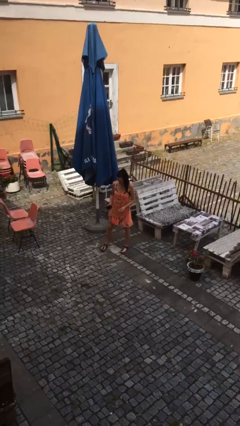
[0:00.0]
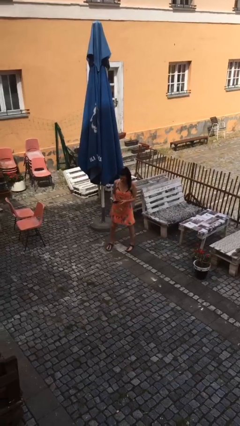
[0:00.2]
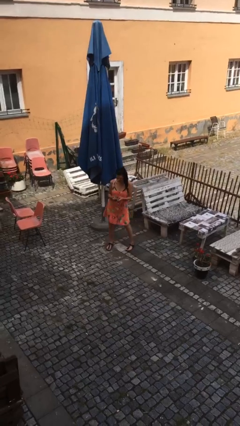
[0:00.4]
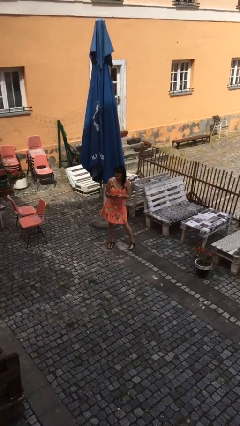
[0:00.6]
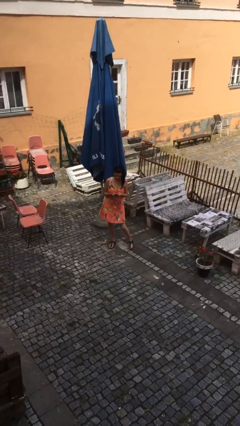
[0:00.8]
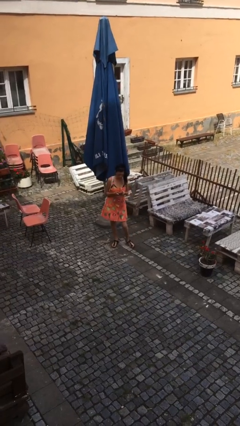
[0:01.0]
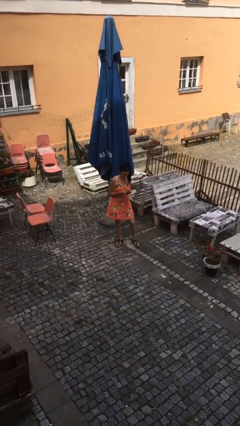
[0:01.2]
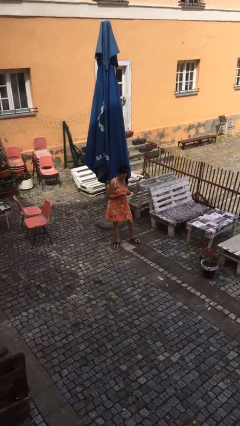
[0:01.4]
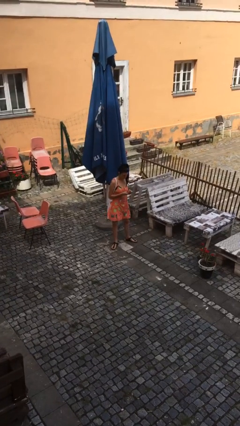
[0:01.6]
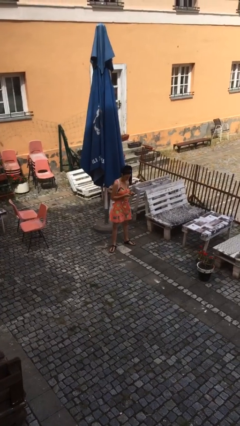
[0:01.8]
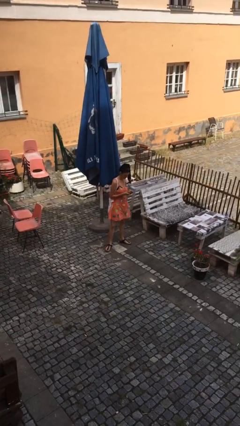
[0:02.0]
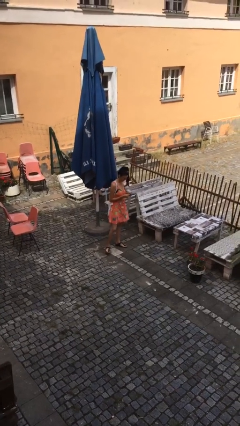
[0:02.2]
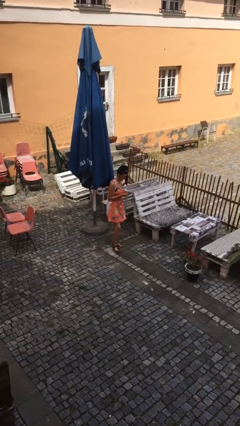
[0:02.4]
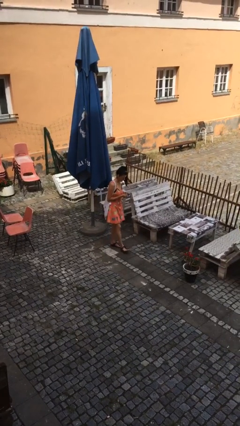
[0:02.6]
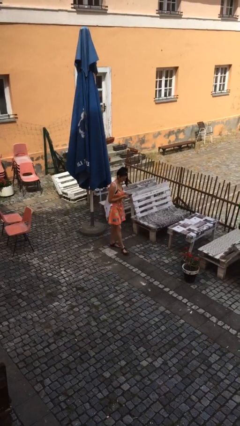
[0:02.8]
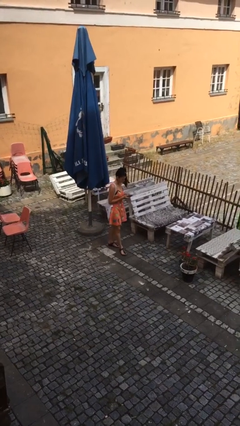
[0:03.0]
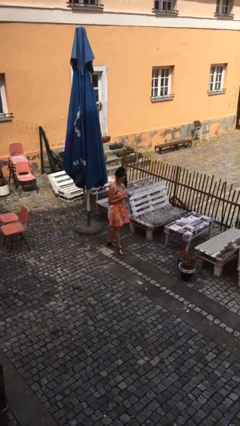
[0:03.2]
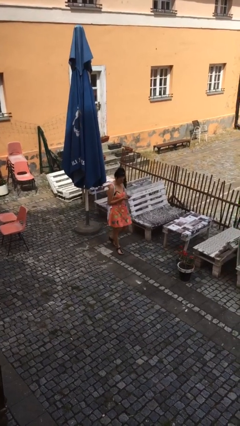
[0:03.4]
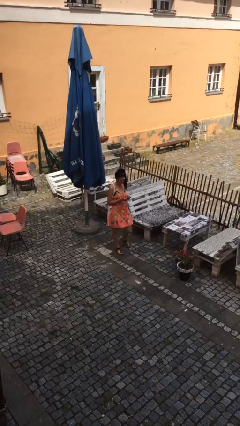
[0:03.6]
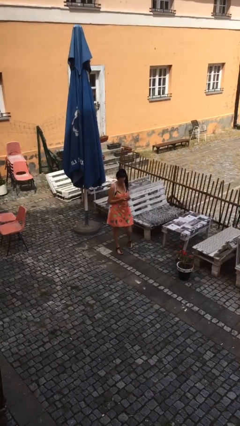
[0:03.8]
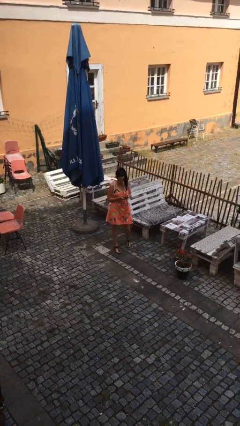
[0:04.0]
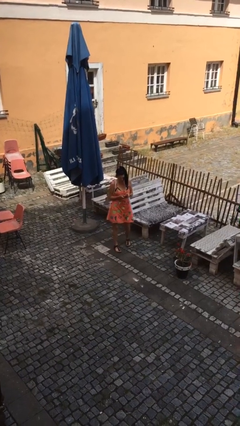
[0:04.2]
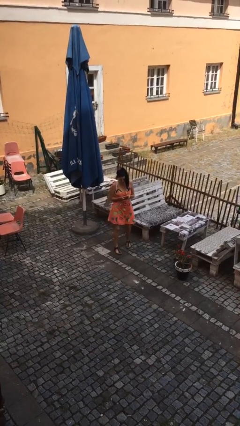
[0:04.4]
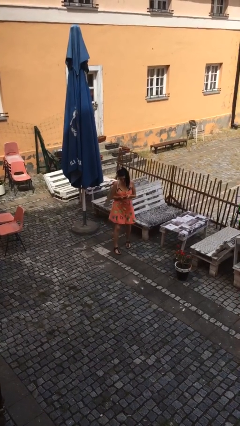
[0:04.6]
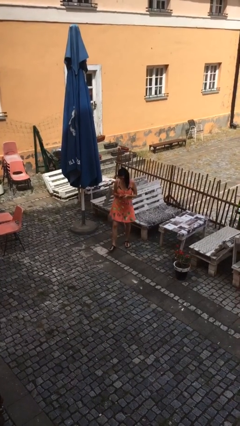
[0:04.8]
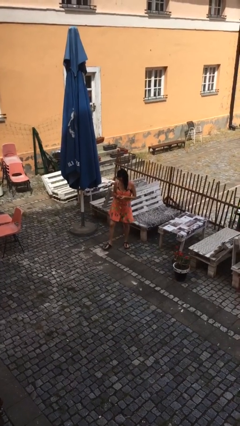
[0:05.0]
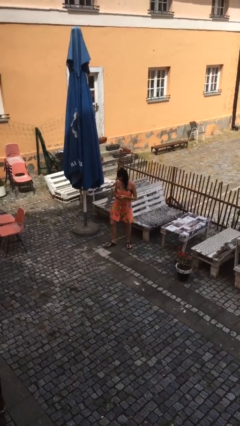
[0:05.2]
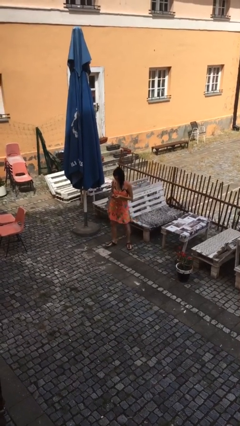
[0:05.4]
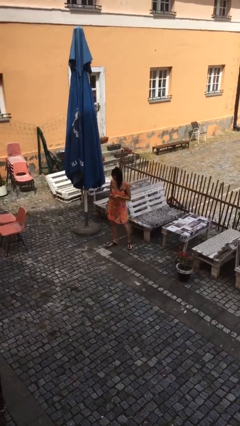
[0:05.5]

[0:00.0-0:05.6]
person texts on phone

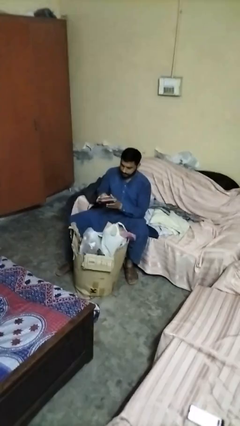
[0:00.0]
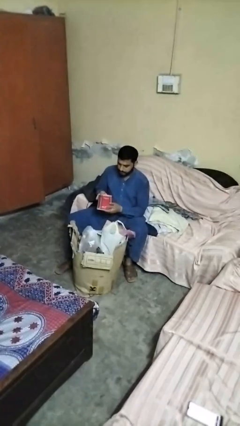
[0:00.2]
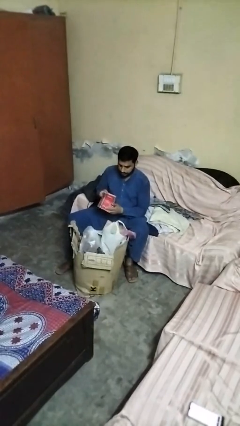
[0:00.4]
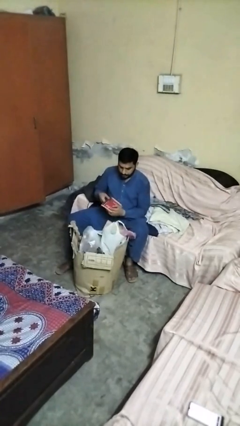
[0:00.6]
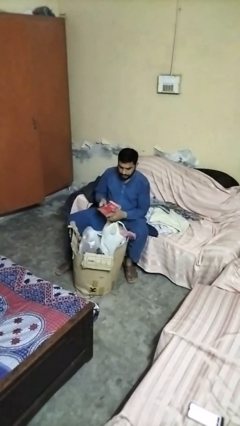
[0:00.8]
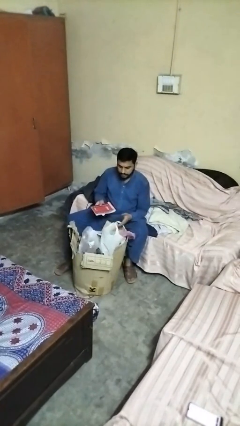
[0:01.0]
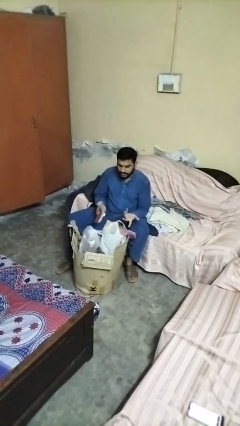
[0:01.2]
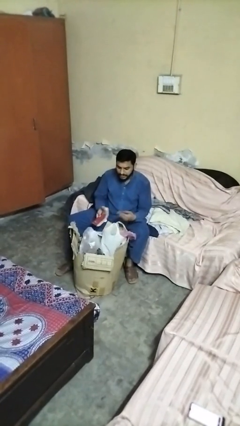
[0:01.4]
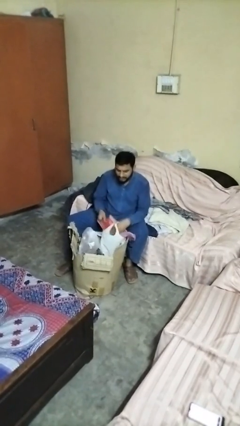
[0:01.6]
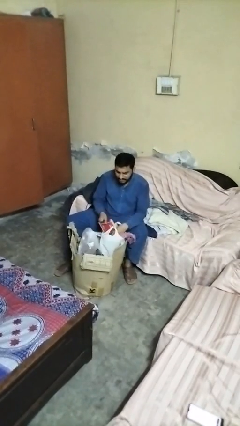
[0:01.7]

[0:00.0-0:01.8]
person takes object from box

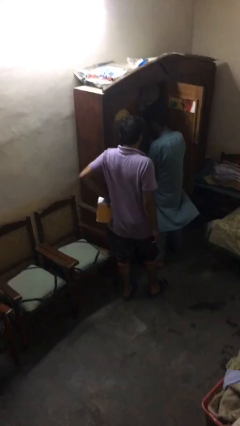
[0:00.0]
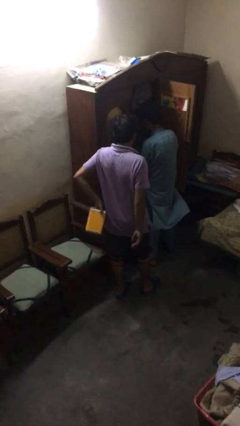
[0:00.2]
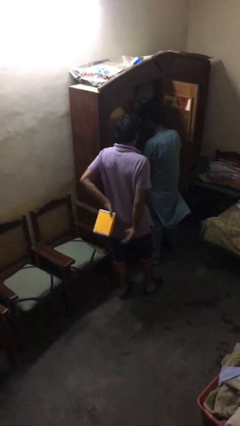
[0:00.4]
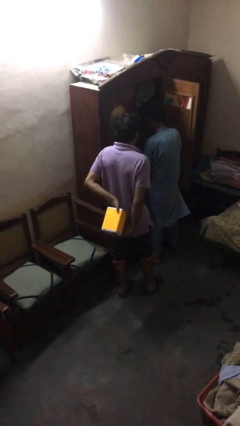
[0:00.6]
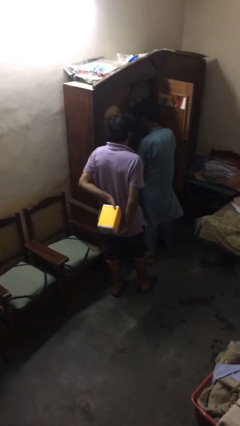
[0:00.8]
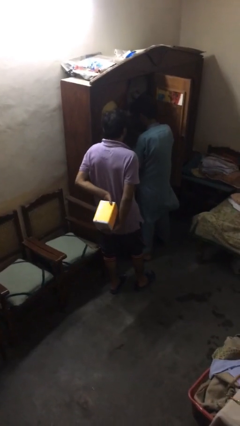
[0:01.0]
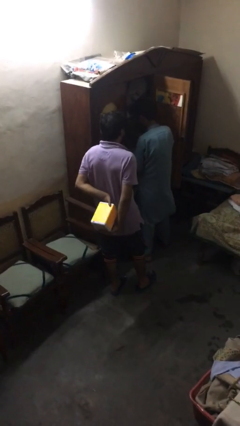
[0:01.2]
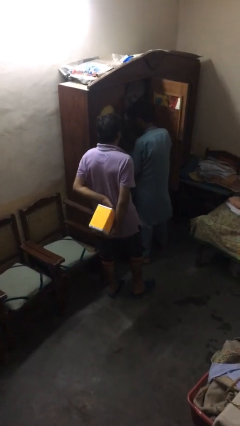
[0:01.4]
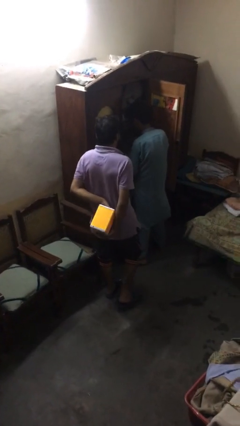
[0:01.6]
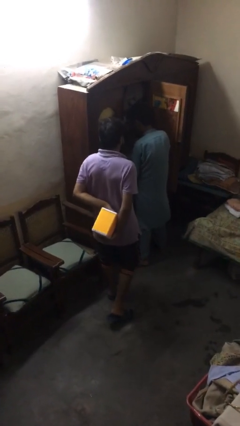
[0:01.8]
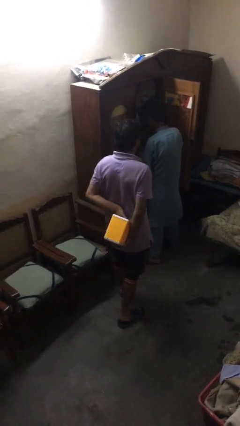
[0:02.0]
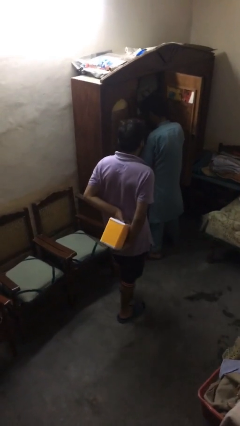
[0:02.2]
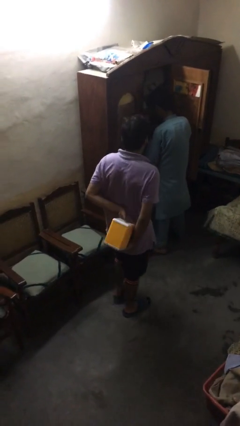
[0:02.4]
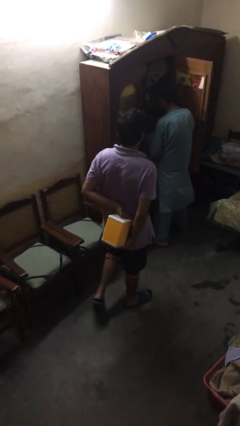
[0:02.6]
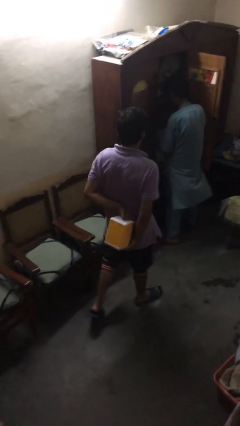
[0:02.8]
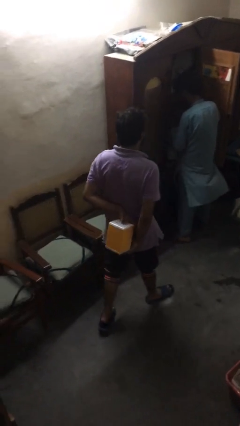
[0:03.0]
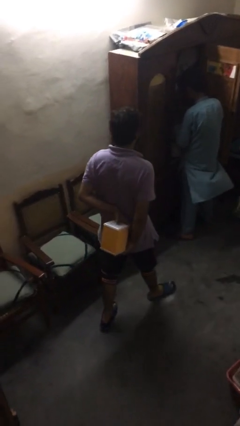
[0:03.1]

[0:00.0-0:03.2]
person steals object from person

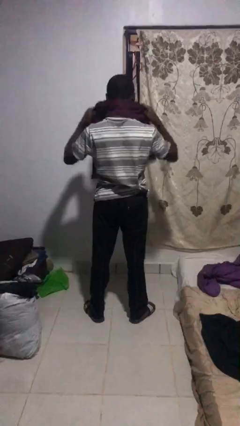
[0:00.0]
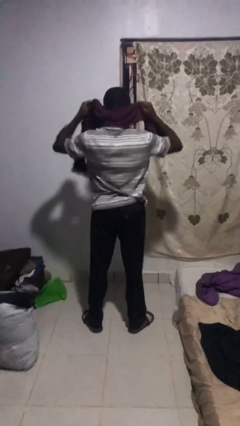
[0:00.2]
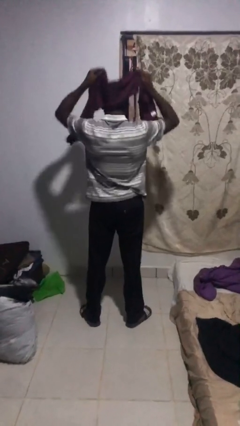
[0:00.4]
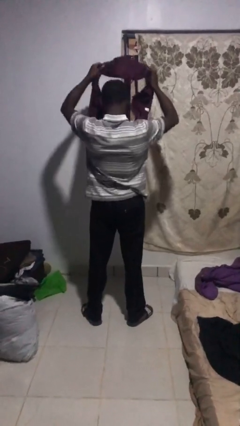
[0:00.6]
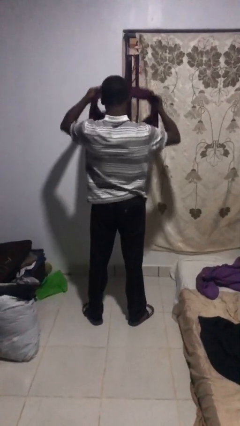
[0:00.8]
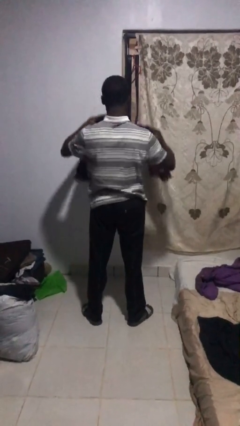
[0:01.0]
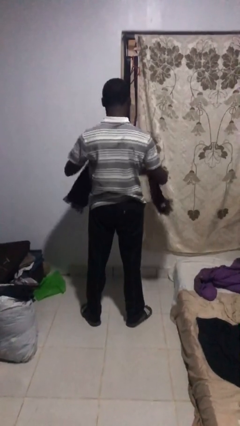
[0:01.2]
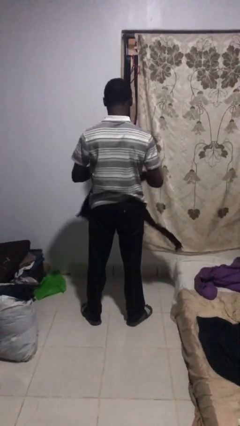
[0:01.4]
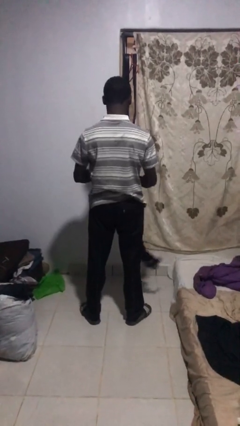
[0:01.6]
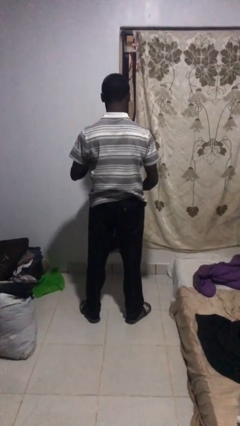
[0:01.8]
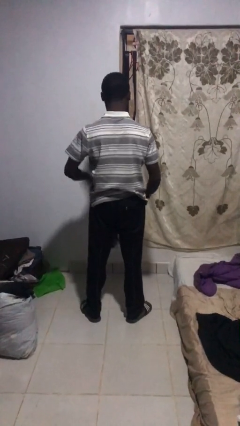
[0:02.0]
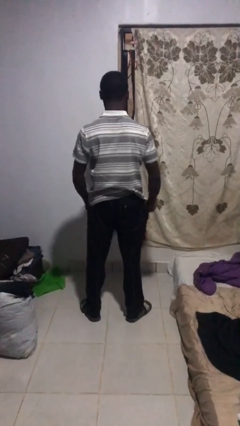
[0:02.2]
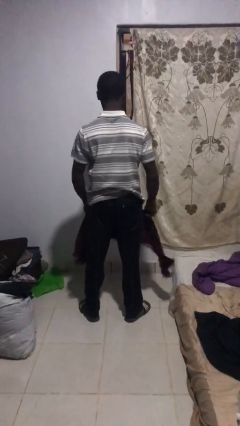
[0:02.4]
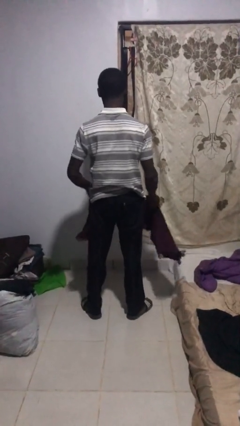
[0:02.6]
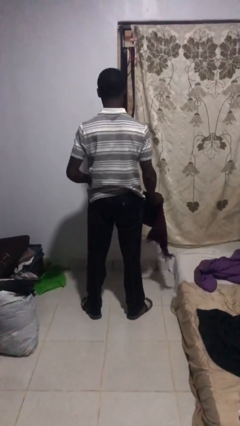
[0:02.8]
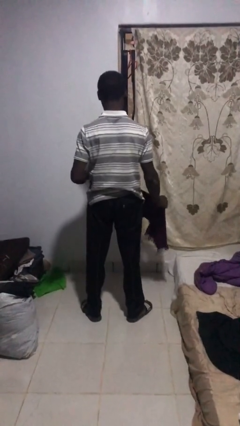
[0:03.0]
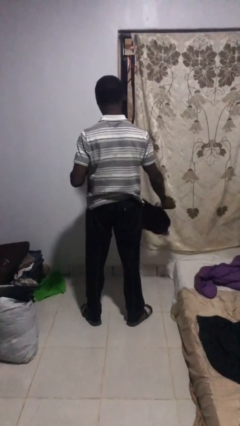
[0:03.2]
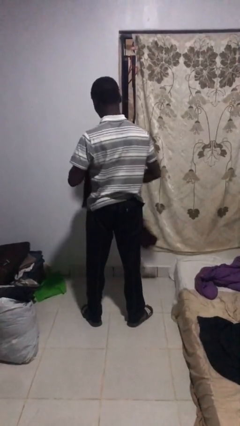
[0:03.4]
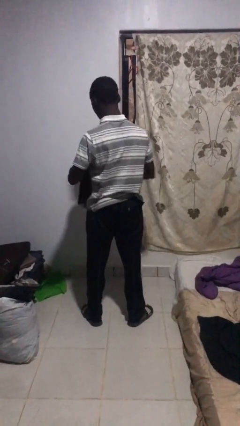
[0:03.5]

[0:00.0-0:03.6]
person takes off scarf

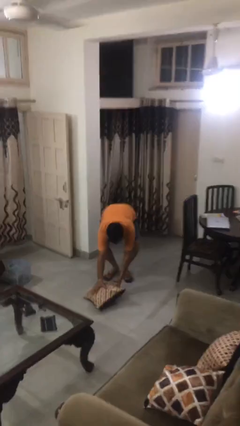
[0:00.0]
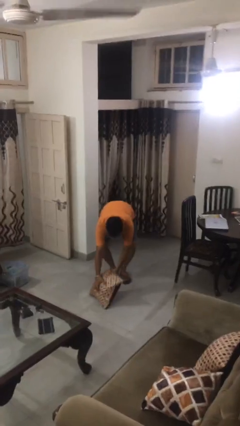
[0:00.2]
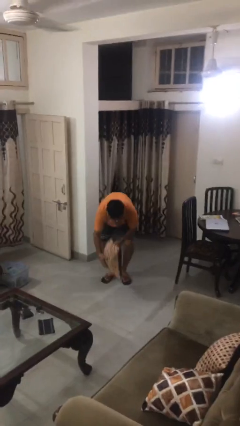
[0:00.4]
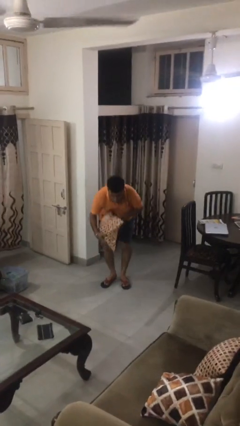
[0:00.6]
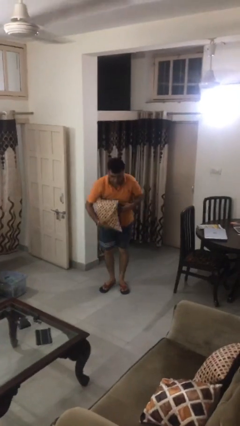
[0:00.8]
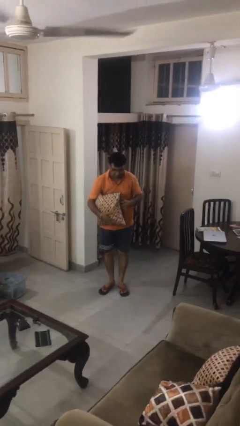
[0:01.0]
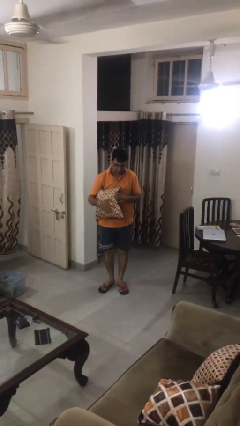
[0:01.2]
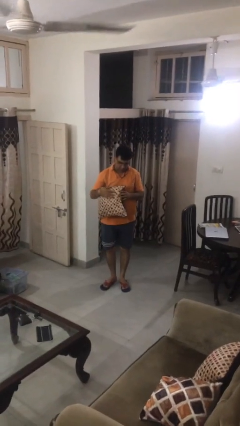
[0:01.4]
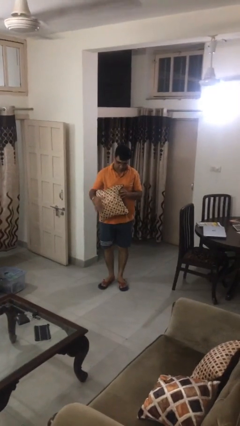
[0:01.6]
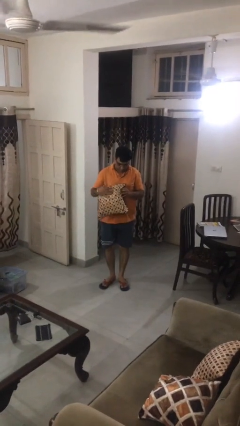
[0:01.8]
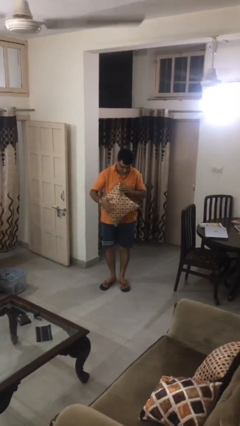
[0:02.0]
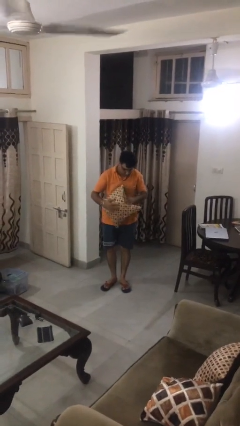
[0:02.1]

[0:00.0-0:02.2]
person picks up object from floor

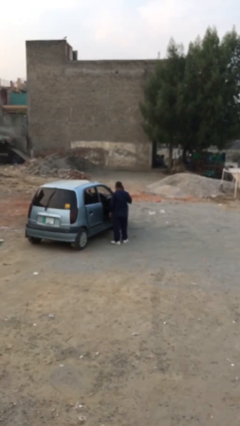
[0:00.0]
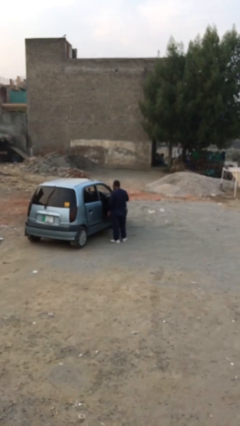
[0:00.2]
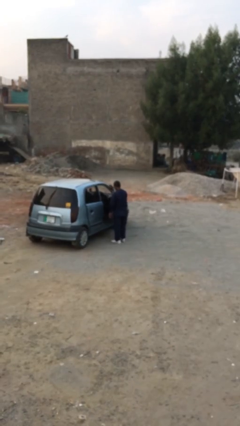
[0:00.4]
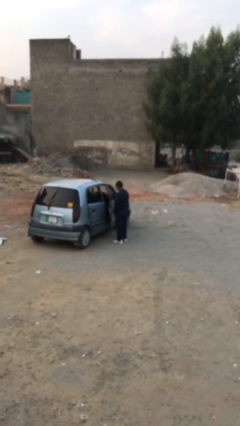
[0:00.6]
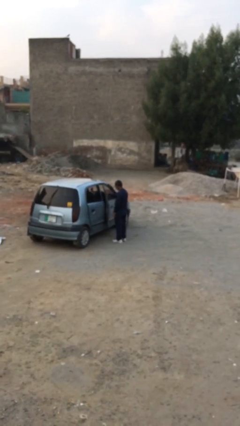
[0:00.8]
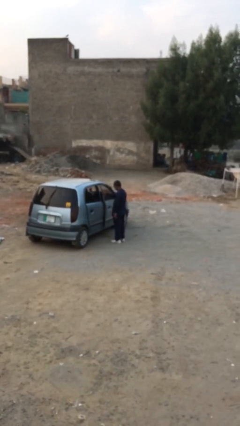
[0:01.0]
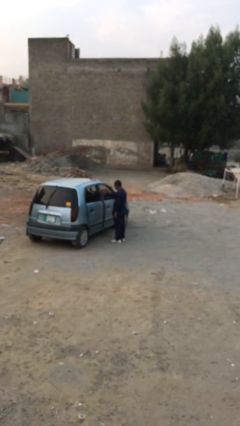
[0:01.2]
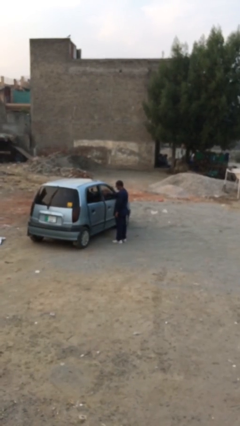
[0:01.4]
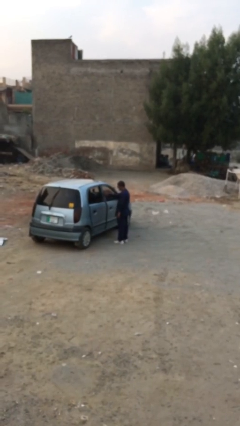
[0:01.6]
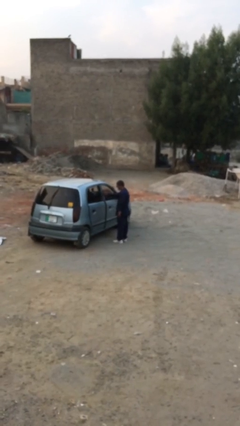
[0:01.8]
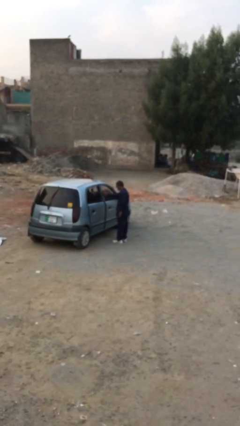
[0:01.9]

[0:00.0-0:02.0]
person closes car door
